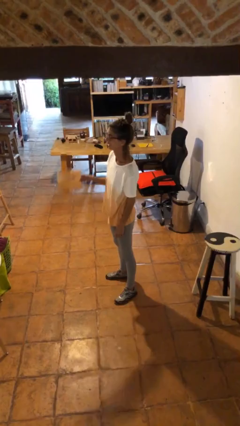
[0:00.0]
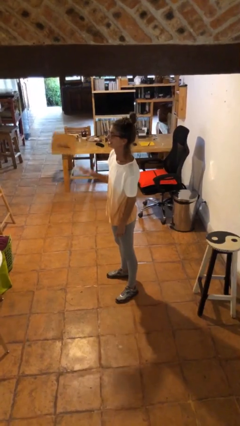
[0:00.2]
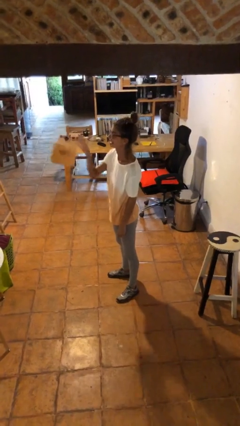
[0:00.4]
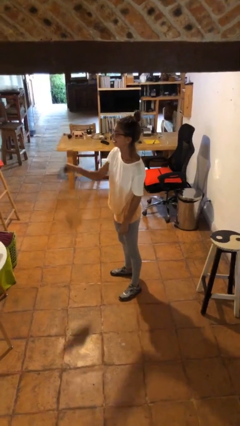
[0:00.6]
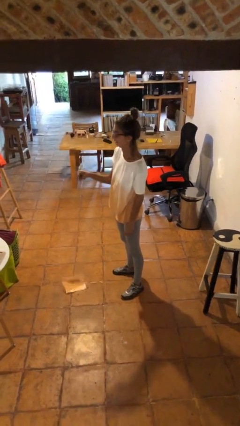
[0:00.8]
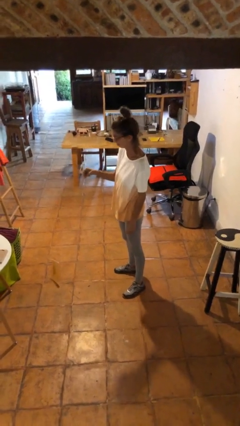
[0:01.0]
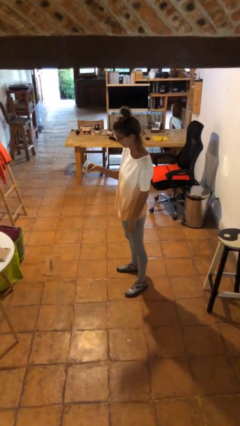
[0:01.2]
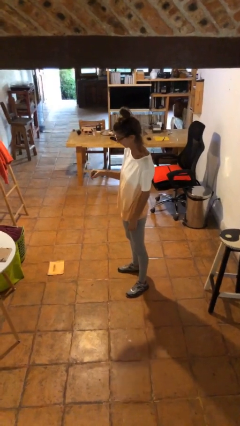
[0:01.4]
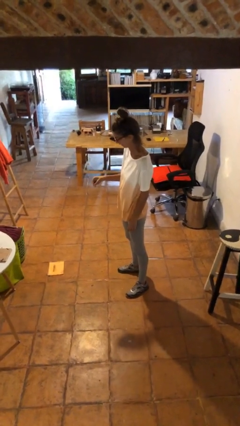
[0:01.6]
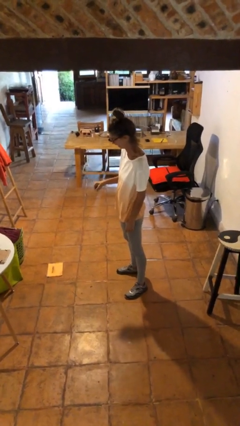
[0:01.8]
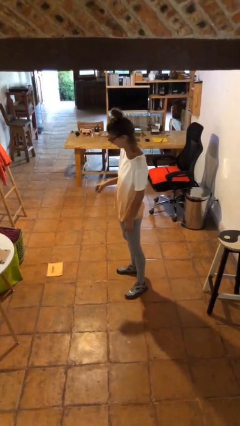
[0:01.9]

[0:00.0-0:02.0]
person drops object

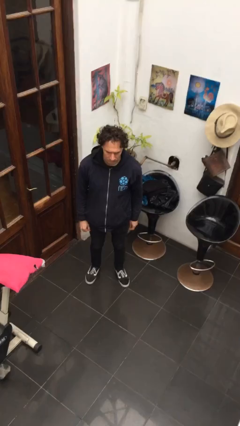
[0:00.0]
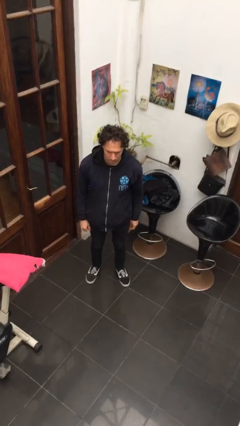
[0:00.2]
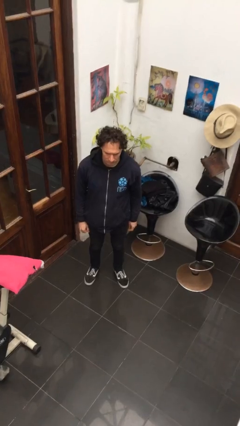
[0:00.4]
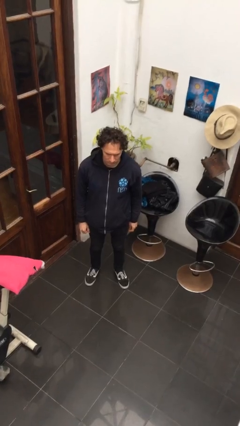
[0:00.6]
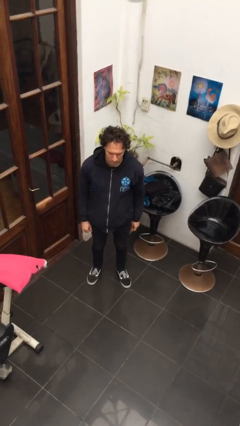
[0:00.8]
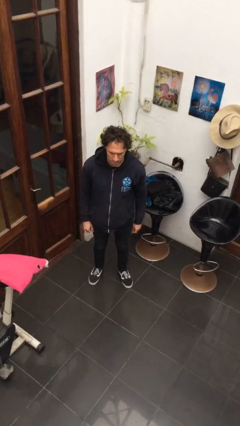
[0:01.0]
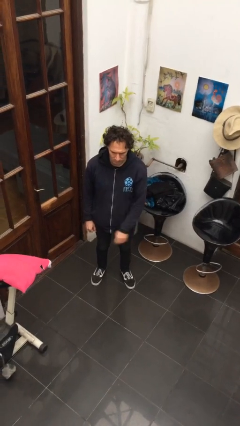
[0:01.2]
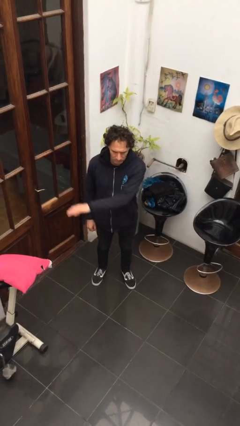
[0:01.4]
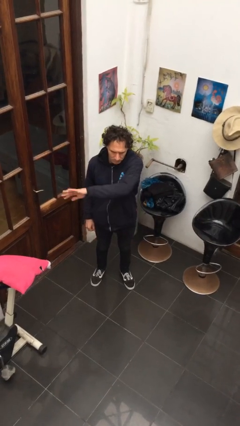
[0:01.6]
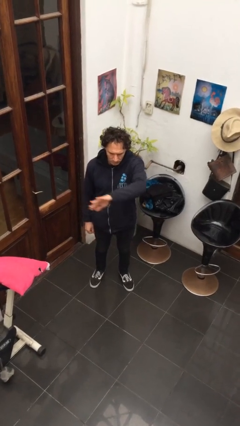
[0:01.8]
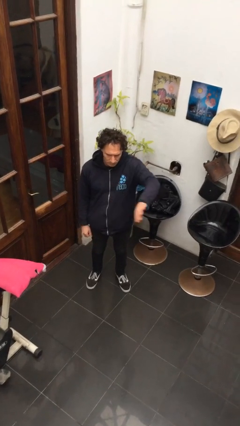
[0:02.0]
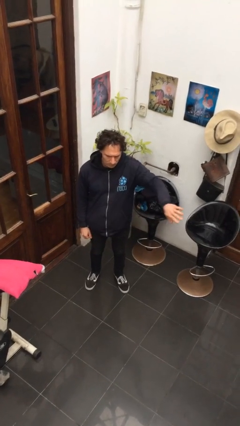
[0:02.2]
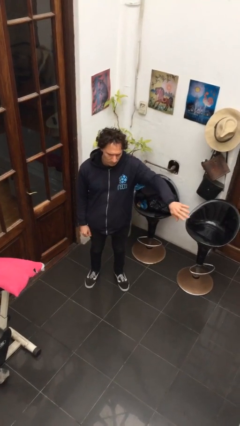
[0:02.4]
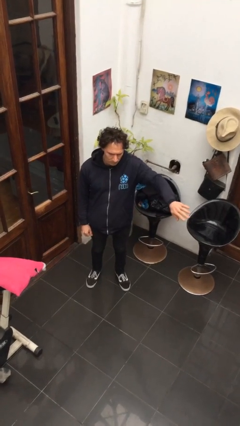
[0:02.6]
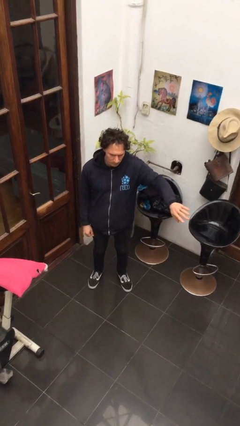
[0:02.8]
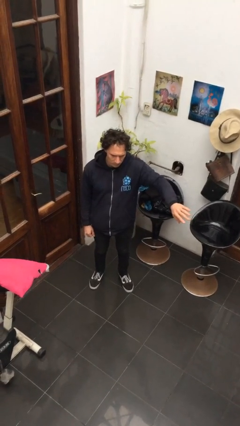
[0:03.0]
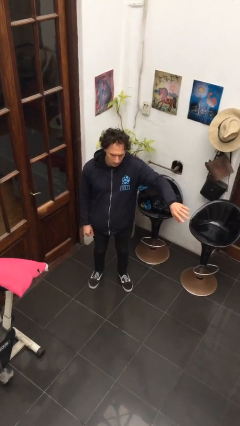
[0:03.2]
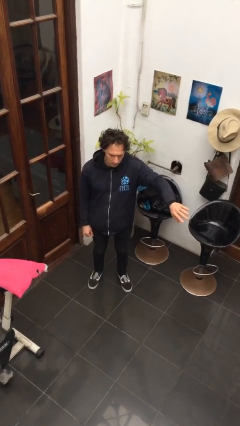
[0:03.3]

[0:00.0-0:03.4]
person gestures swipe left

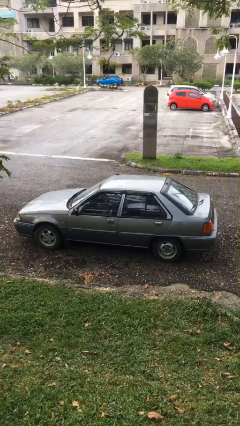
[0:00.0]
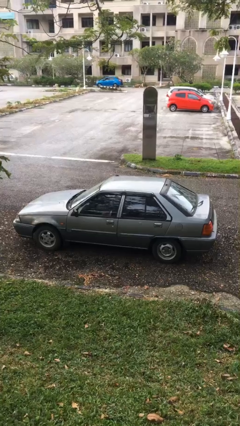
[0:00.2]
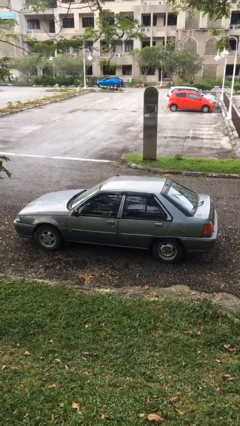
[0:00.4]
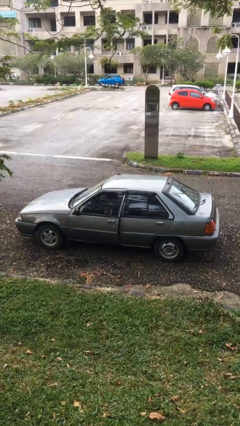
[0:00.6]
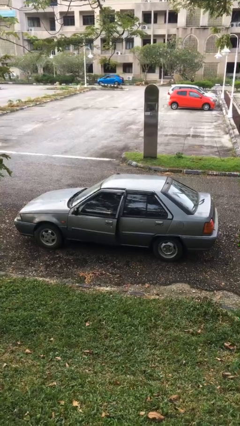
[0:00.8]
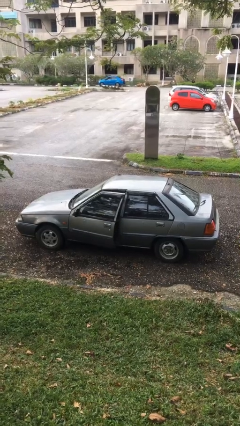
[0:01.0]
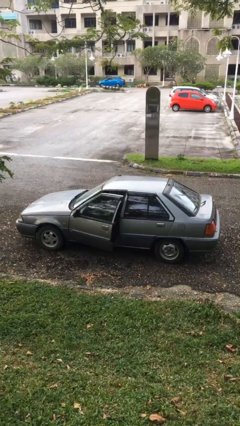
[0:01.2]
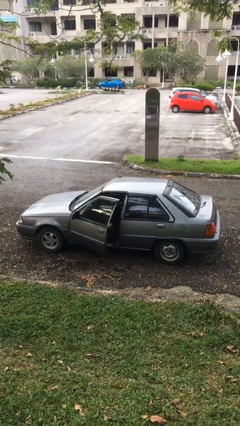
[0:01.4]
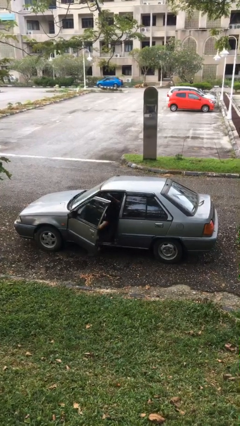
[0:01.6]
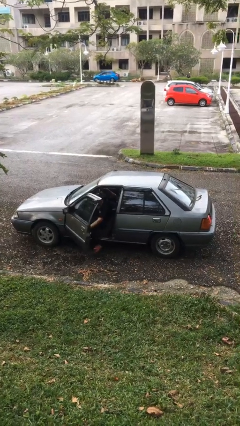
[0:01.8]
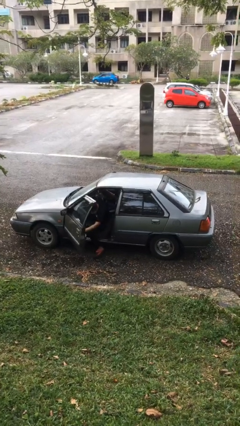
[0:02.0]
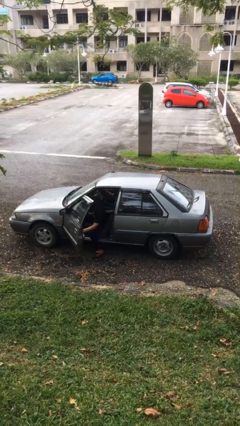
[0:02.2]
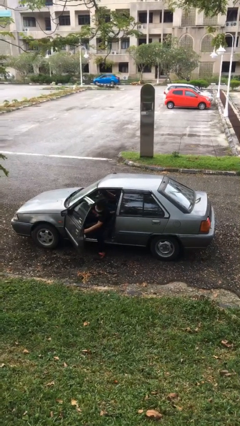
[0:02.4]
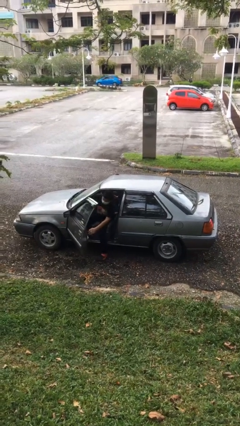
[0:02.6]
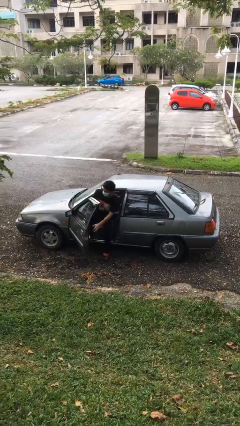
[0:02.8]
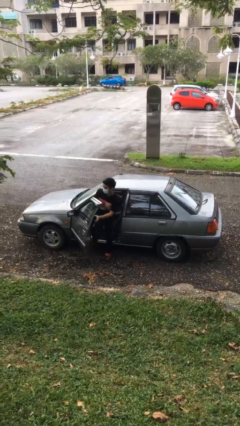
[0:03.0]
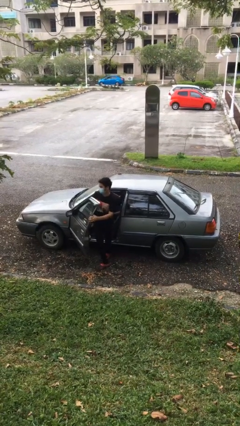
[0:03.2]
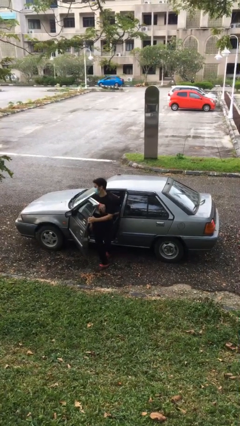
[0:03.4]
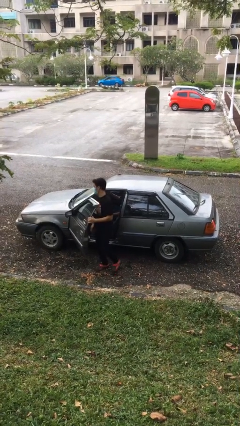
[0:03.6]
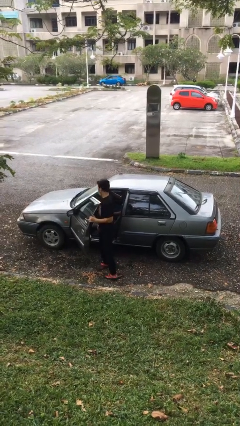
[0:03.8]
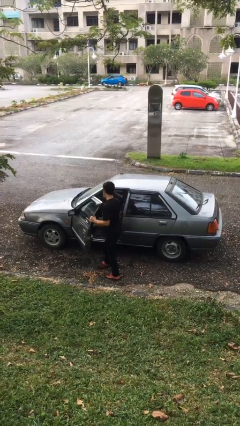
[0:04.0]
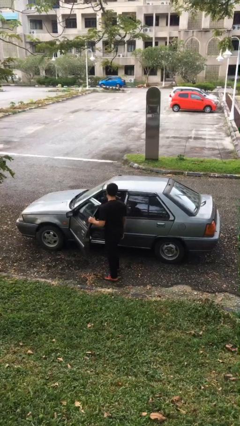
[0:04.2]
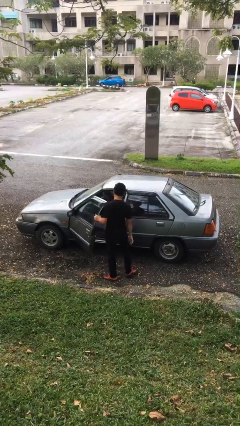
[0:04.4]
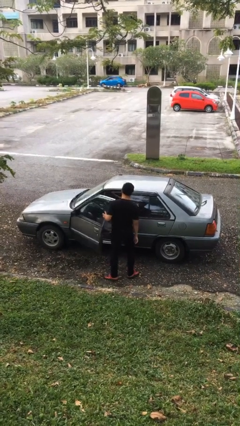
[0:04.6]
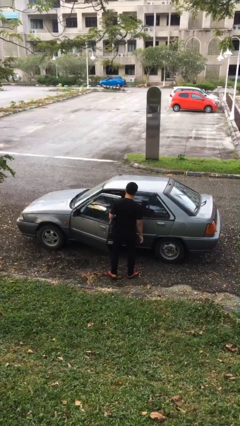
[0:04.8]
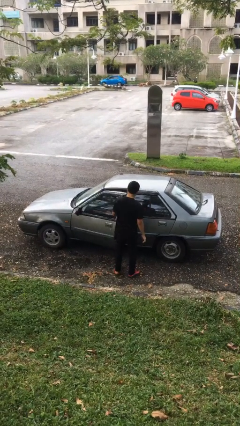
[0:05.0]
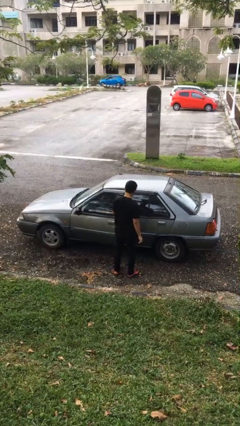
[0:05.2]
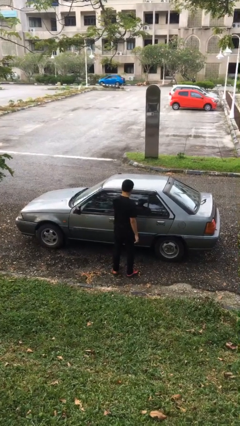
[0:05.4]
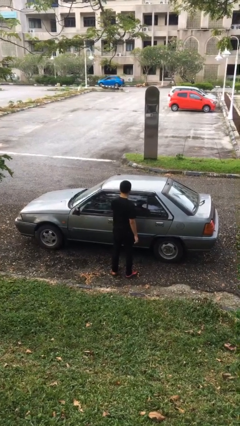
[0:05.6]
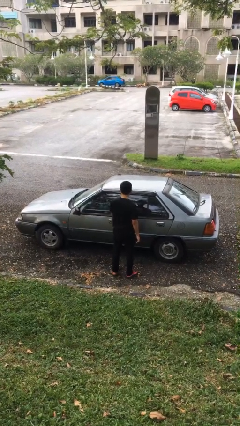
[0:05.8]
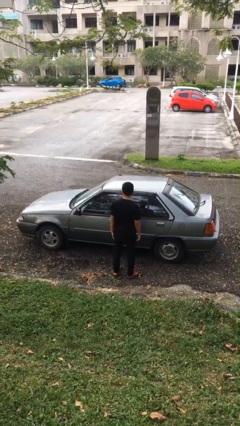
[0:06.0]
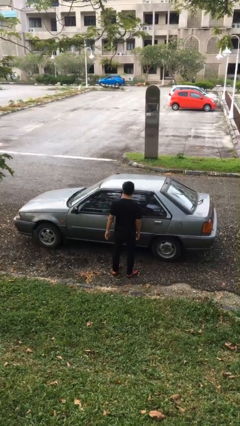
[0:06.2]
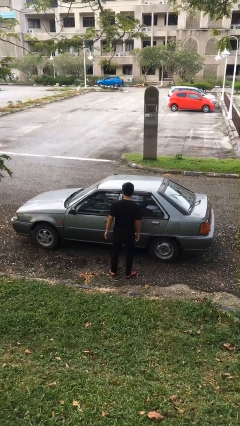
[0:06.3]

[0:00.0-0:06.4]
car drops off person

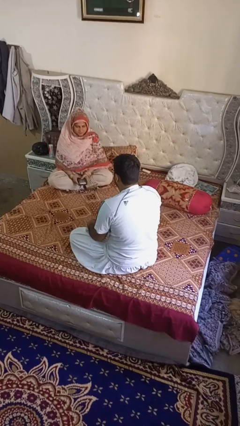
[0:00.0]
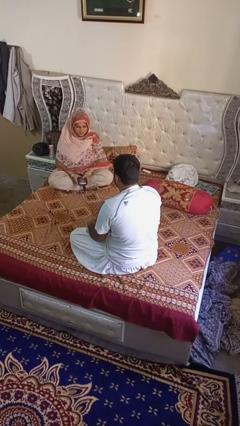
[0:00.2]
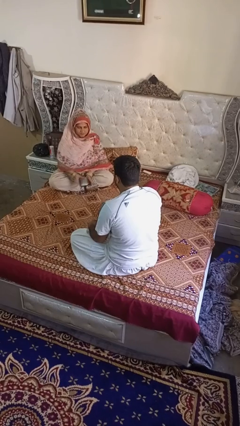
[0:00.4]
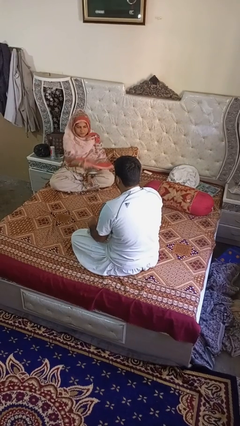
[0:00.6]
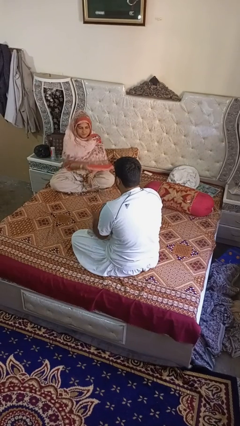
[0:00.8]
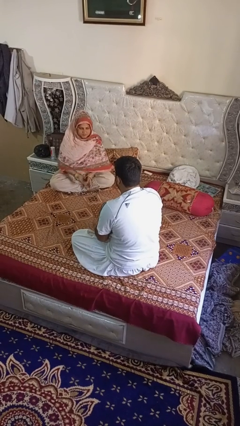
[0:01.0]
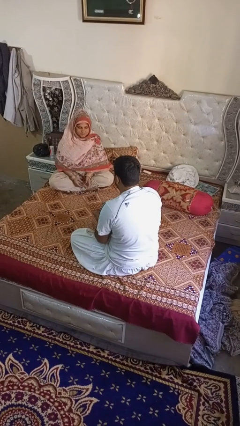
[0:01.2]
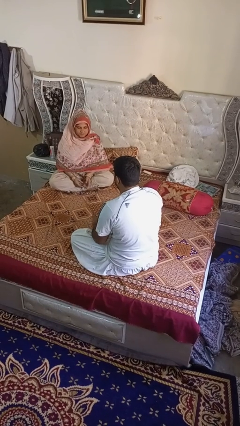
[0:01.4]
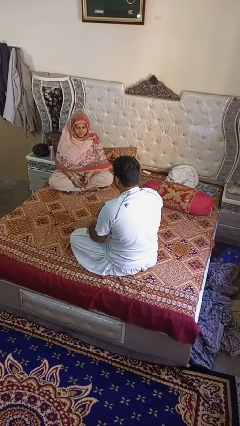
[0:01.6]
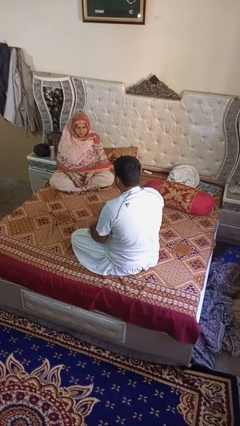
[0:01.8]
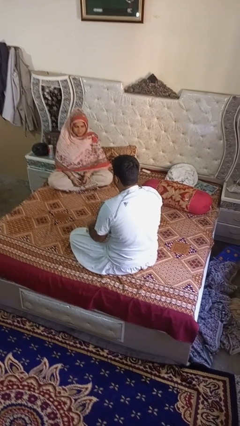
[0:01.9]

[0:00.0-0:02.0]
person catches object from person

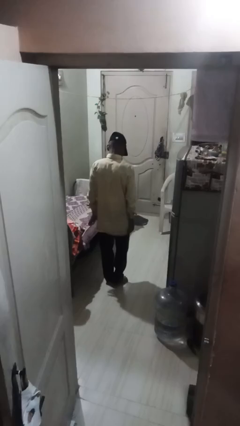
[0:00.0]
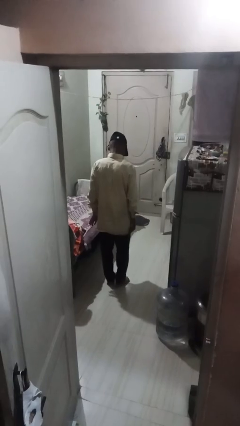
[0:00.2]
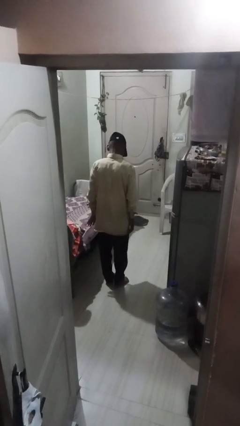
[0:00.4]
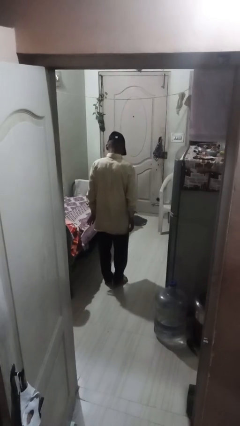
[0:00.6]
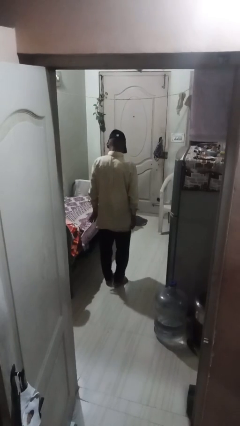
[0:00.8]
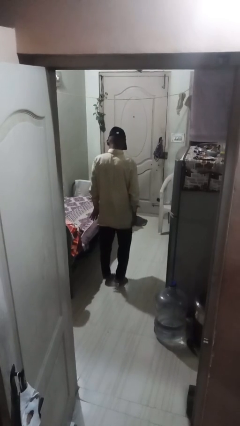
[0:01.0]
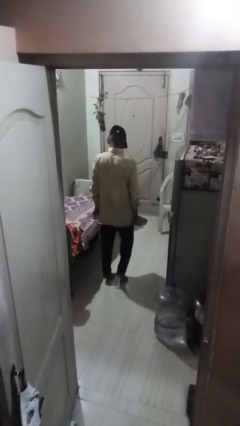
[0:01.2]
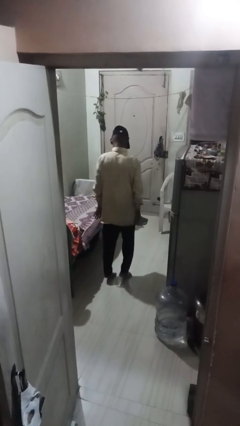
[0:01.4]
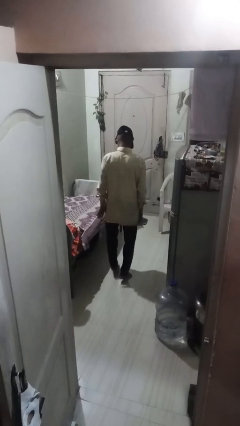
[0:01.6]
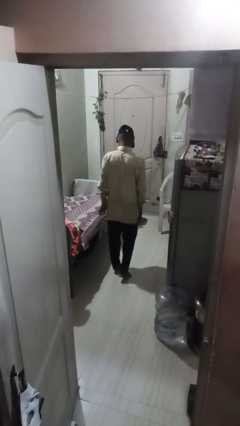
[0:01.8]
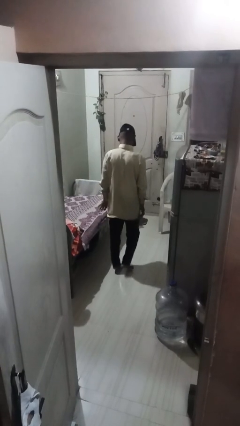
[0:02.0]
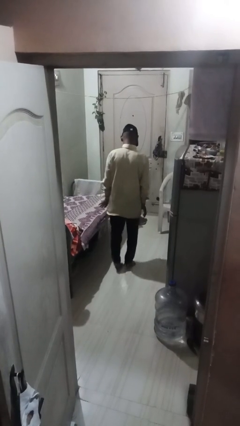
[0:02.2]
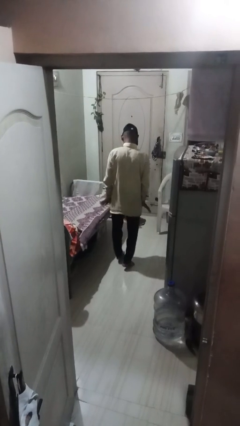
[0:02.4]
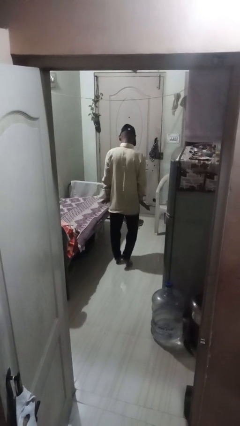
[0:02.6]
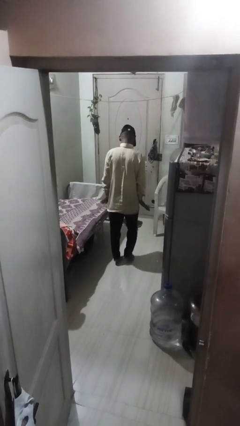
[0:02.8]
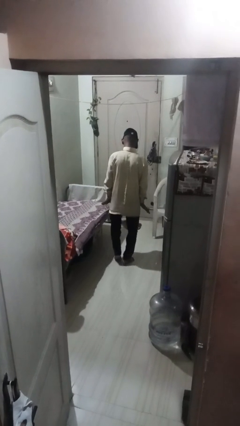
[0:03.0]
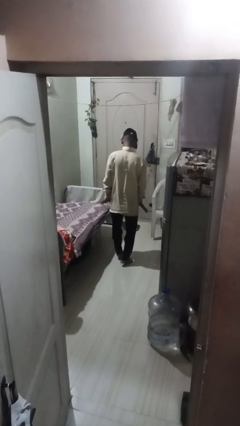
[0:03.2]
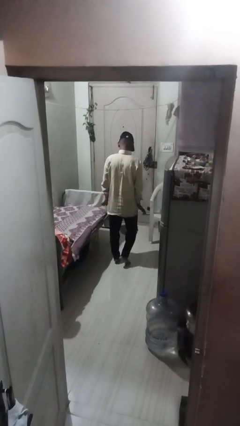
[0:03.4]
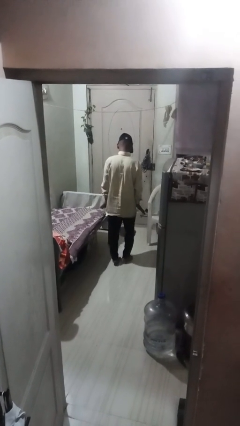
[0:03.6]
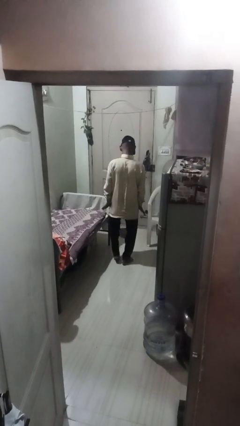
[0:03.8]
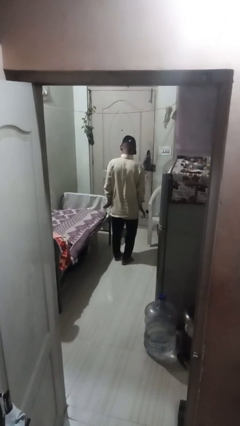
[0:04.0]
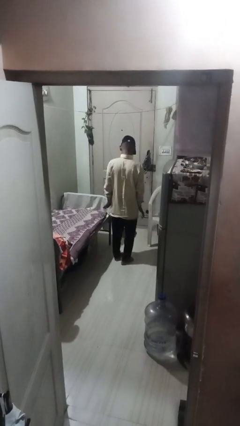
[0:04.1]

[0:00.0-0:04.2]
person walks tiptoe
